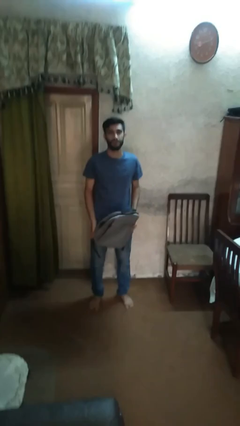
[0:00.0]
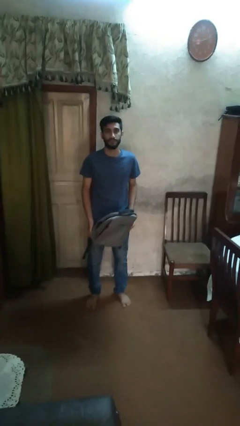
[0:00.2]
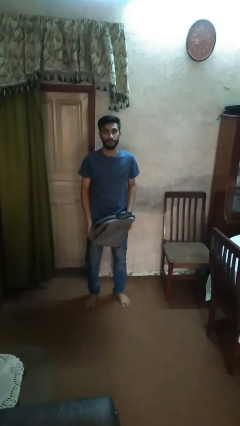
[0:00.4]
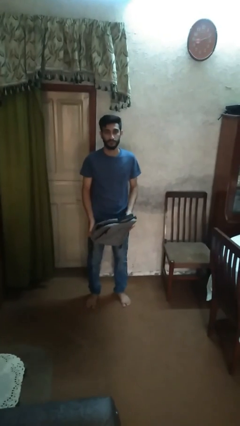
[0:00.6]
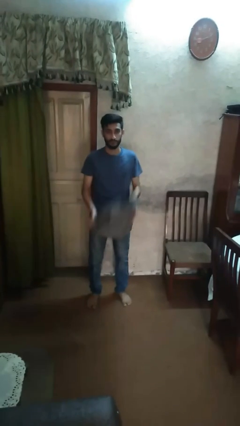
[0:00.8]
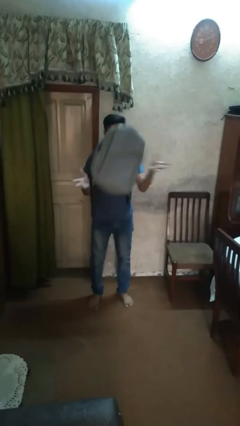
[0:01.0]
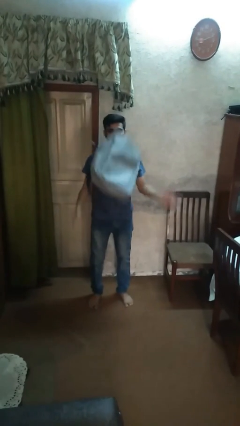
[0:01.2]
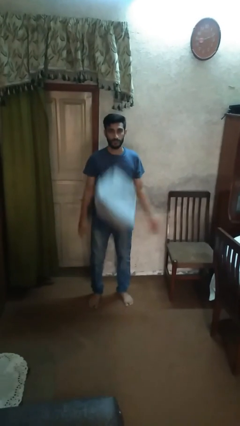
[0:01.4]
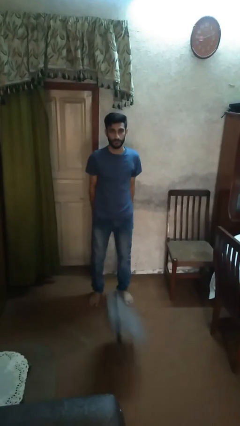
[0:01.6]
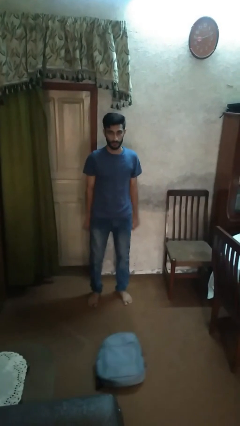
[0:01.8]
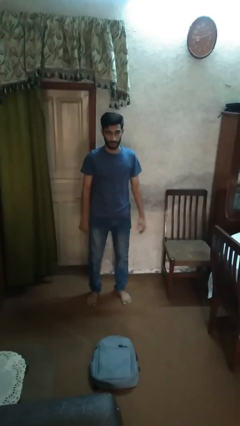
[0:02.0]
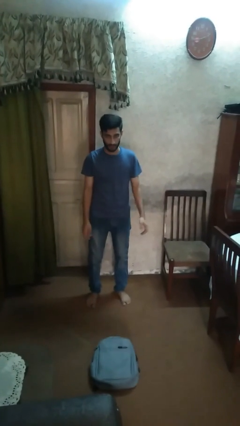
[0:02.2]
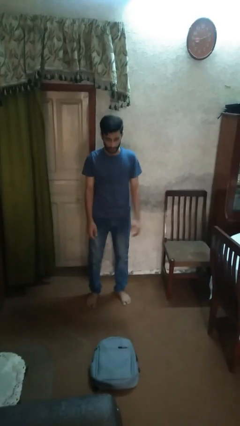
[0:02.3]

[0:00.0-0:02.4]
person throws object into air

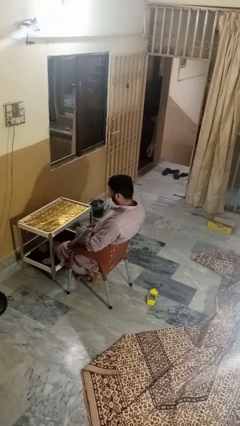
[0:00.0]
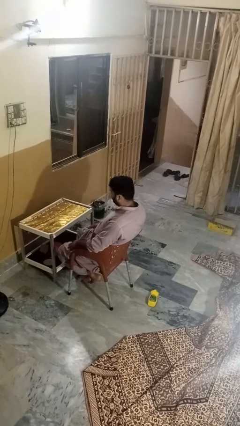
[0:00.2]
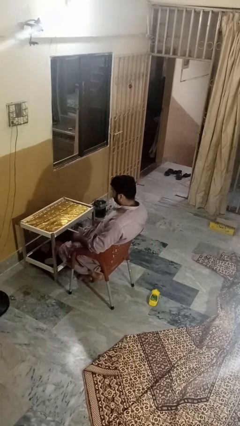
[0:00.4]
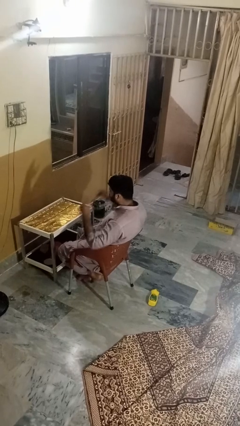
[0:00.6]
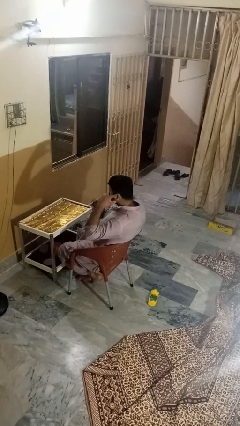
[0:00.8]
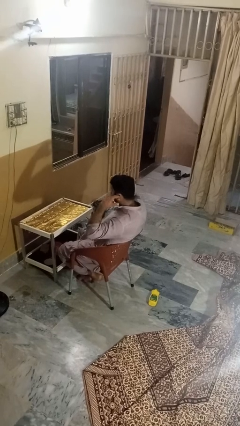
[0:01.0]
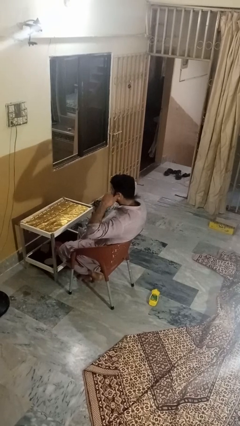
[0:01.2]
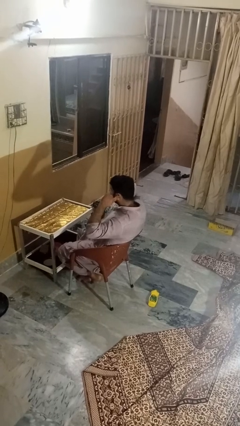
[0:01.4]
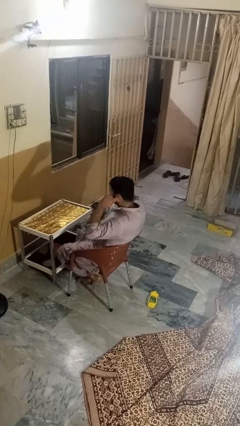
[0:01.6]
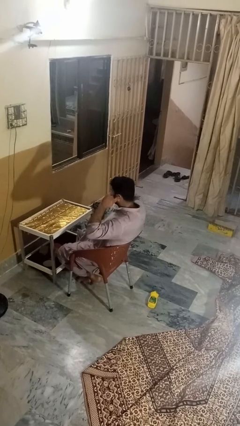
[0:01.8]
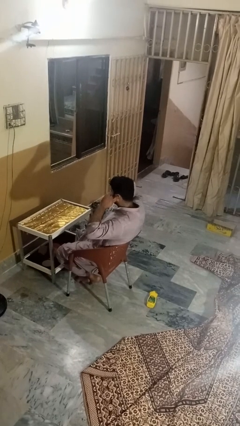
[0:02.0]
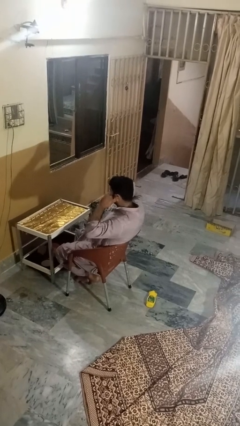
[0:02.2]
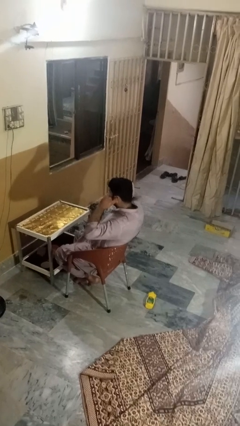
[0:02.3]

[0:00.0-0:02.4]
person puts fingers in ear

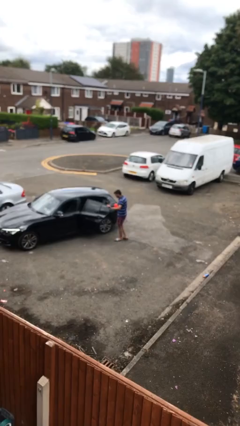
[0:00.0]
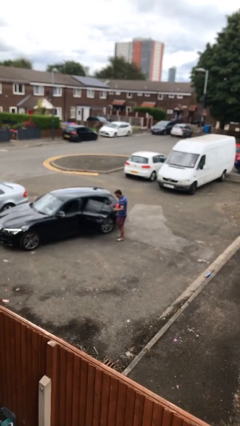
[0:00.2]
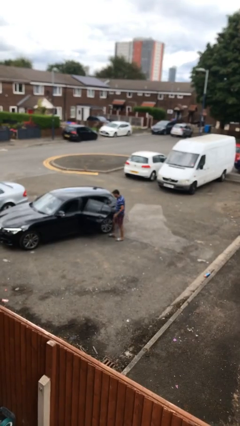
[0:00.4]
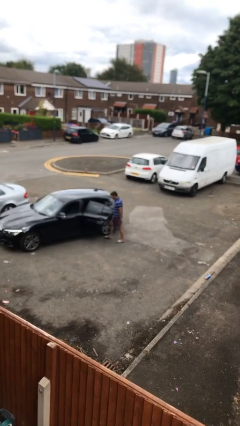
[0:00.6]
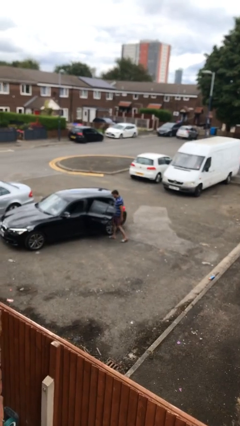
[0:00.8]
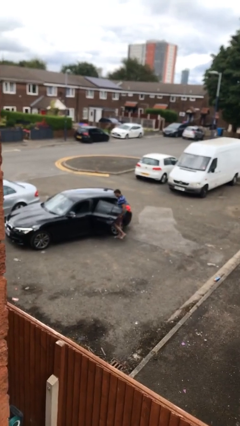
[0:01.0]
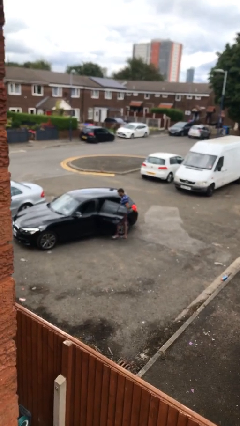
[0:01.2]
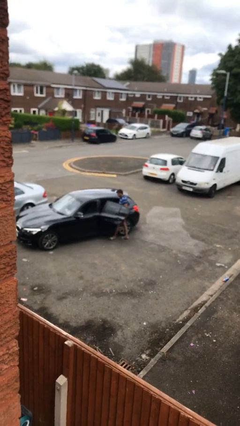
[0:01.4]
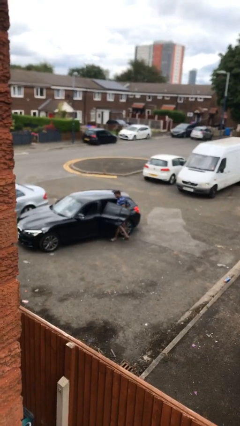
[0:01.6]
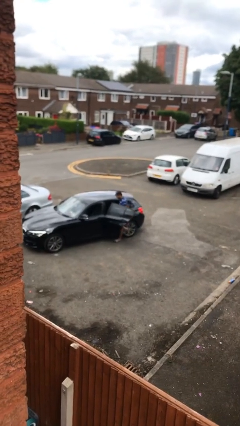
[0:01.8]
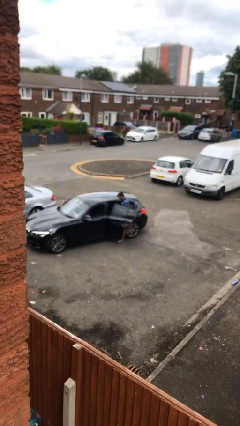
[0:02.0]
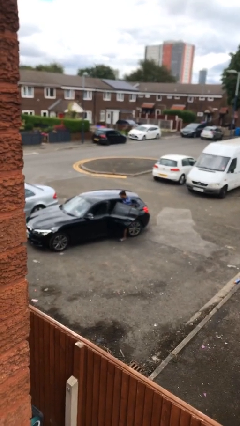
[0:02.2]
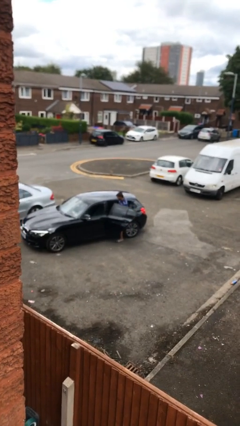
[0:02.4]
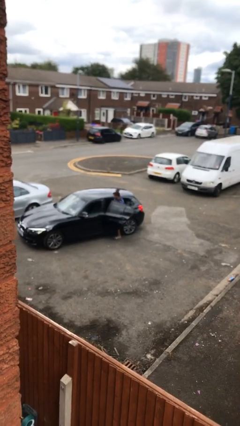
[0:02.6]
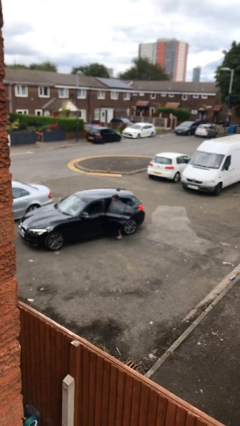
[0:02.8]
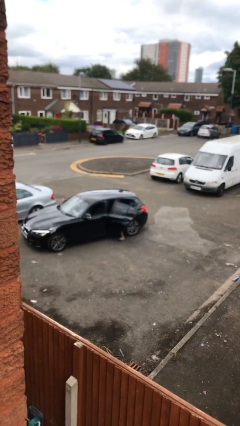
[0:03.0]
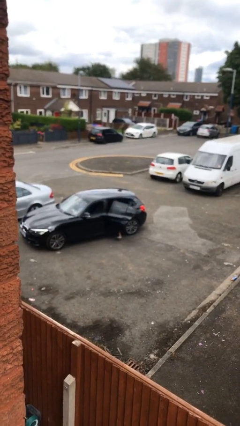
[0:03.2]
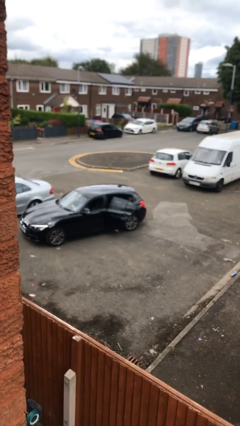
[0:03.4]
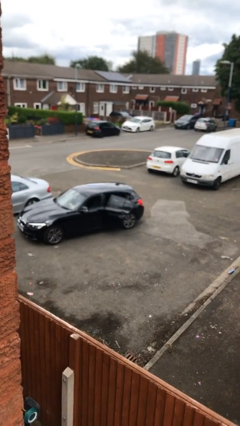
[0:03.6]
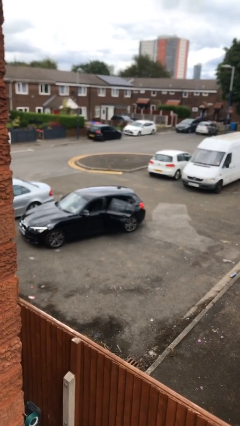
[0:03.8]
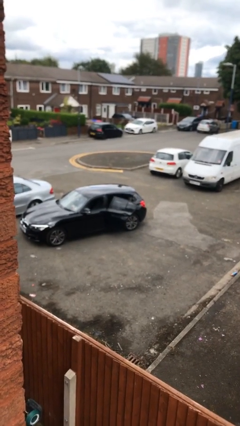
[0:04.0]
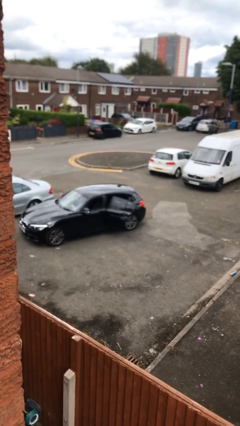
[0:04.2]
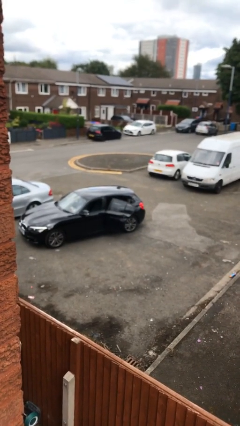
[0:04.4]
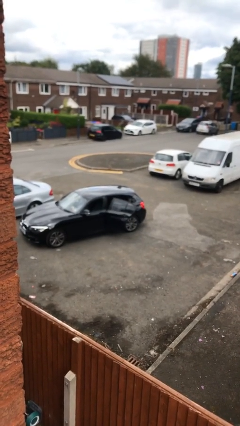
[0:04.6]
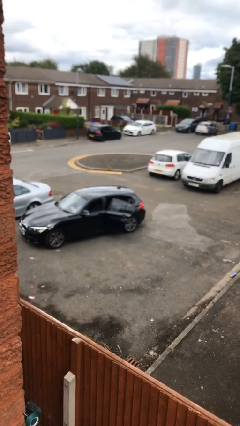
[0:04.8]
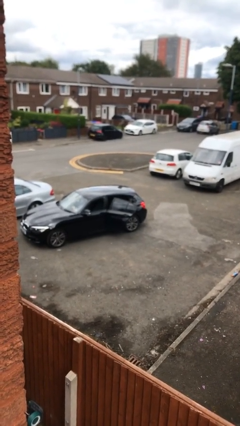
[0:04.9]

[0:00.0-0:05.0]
person enters car

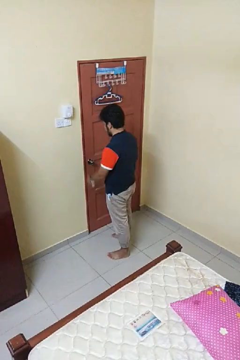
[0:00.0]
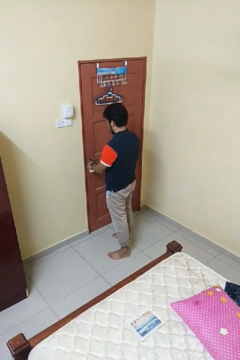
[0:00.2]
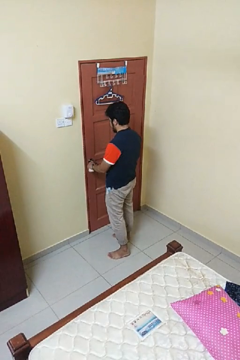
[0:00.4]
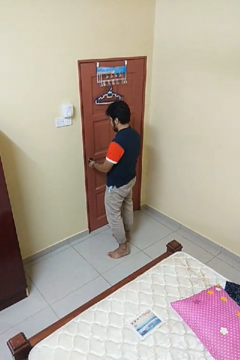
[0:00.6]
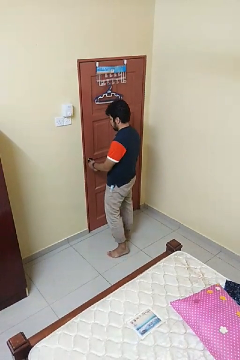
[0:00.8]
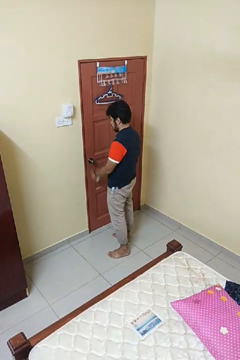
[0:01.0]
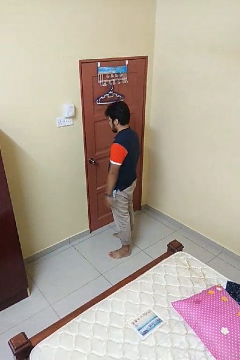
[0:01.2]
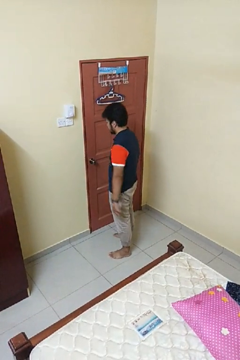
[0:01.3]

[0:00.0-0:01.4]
person unlocks door with keys

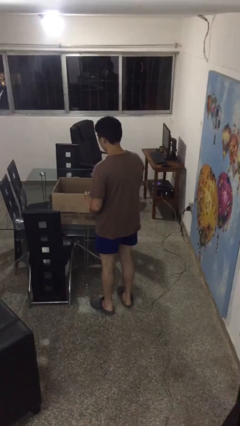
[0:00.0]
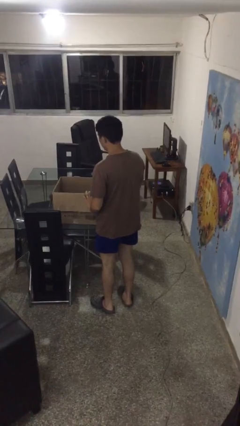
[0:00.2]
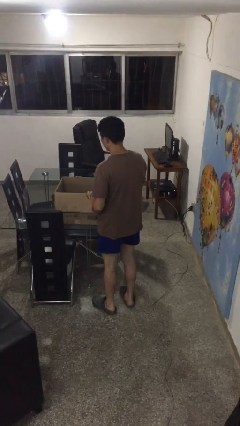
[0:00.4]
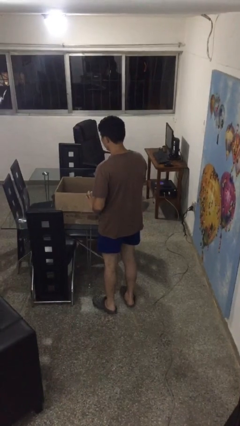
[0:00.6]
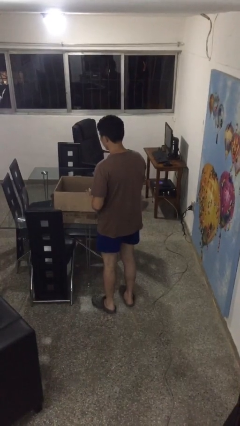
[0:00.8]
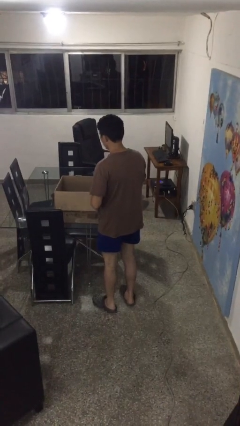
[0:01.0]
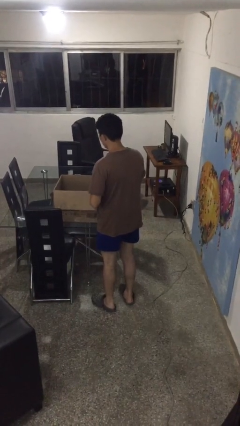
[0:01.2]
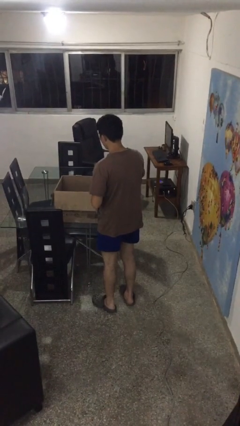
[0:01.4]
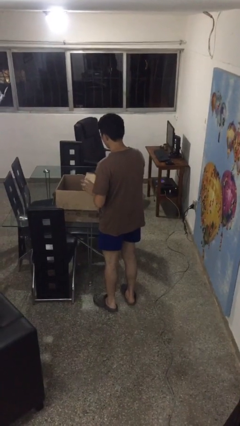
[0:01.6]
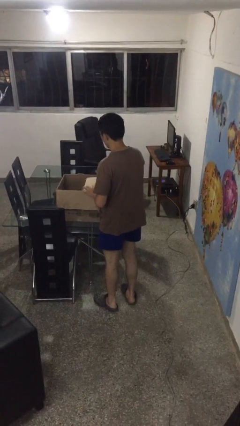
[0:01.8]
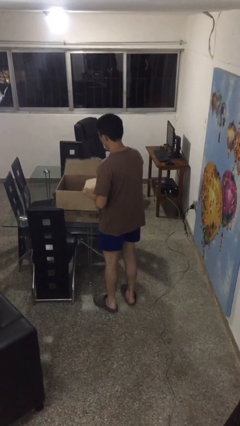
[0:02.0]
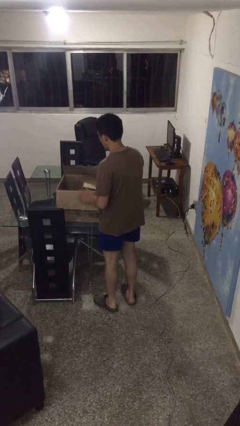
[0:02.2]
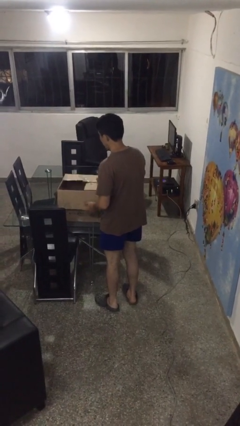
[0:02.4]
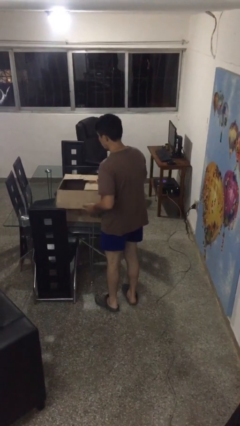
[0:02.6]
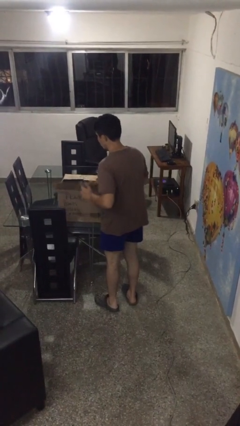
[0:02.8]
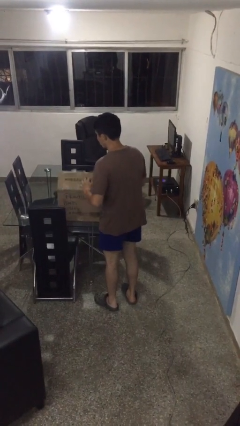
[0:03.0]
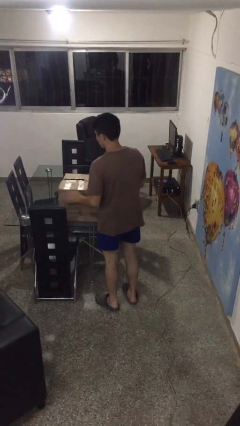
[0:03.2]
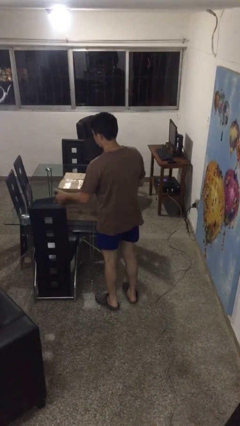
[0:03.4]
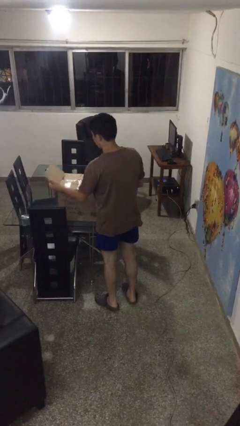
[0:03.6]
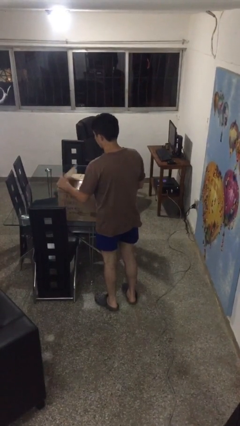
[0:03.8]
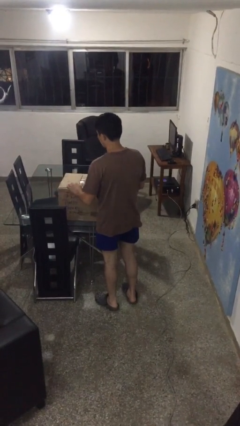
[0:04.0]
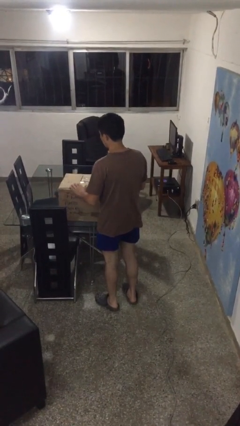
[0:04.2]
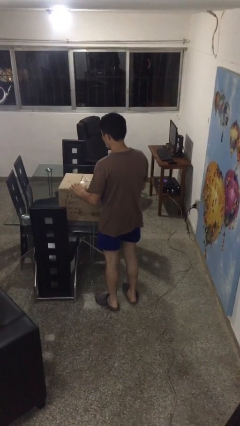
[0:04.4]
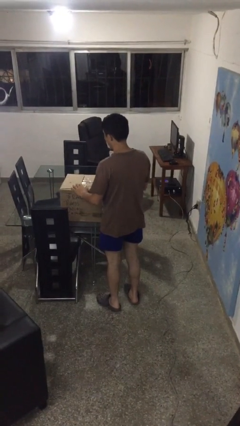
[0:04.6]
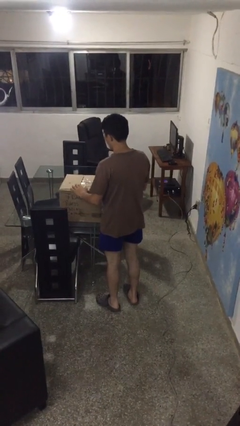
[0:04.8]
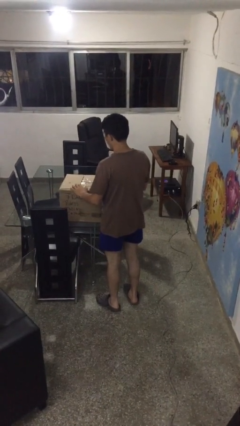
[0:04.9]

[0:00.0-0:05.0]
person closes box

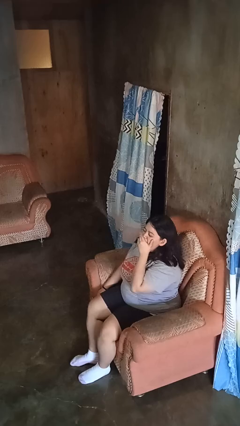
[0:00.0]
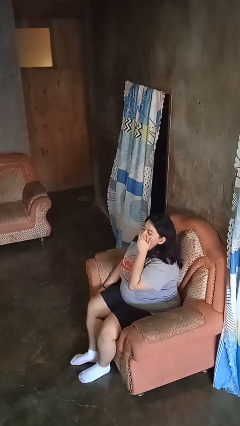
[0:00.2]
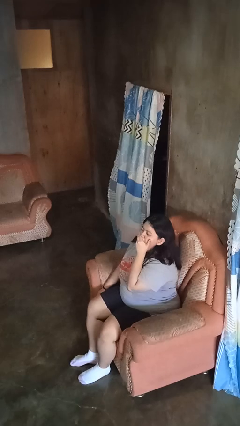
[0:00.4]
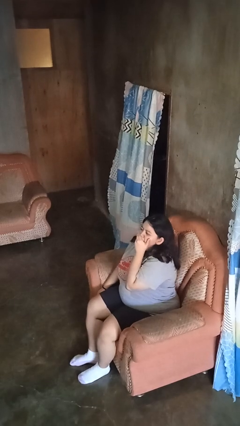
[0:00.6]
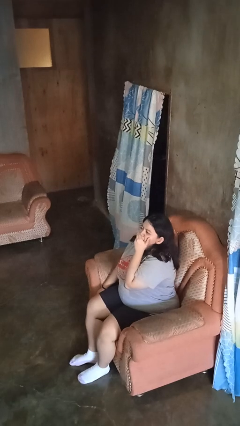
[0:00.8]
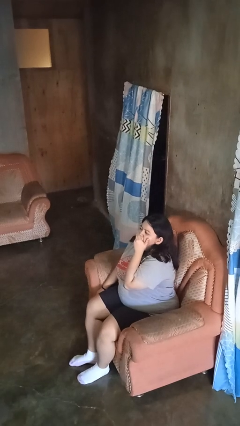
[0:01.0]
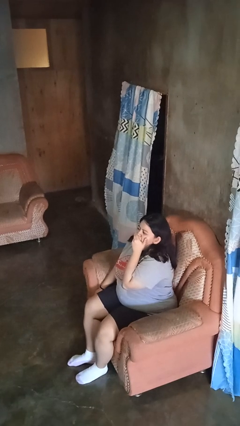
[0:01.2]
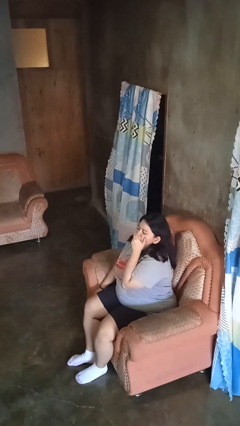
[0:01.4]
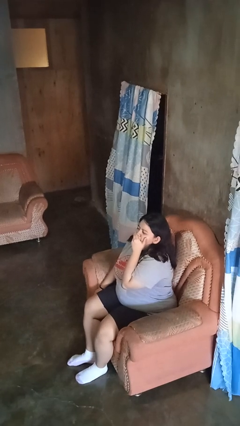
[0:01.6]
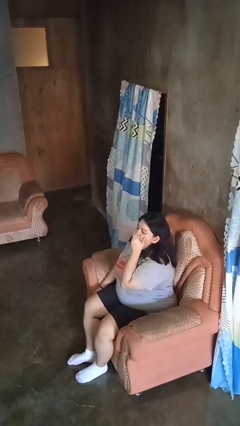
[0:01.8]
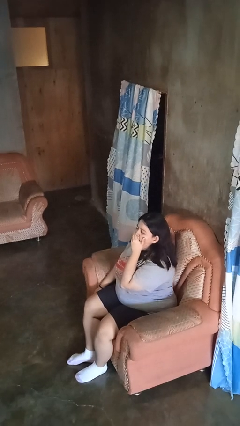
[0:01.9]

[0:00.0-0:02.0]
person yawns
